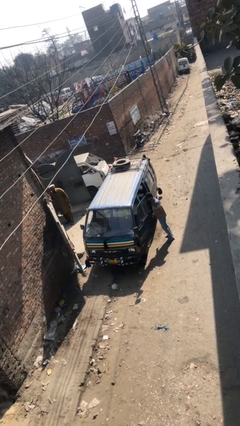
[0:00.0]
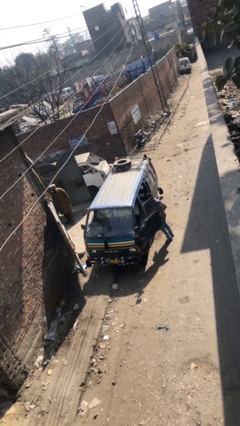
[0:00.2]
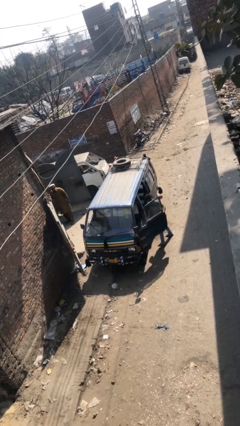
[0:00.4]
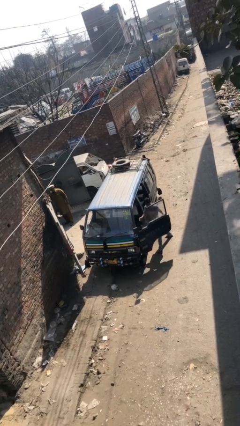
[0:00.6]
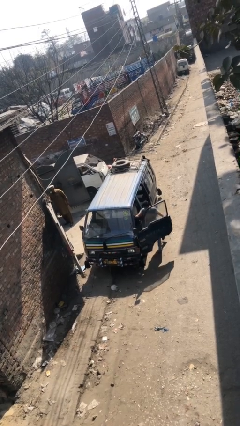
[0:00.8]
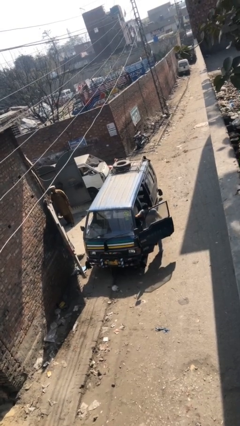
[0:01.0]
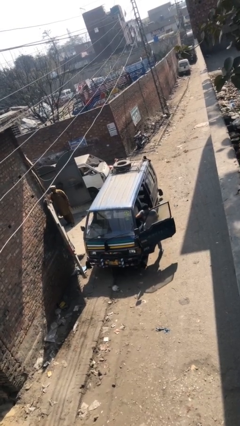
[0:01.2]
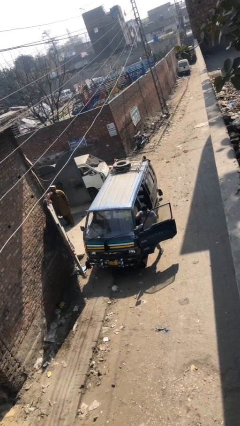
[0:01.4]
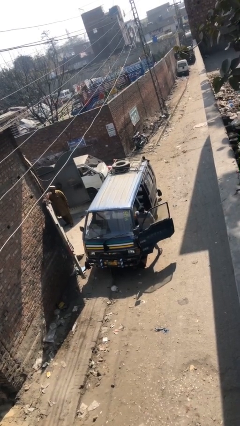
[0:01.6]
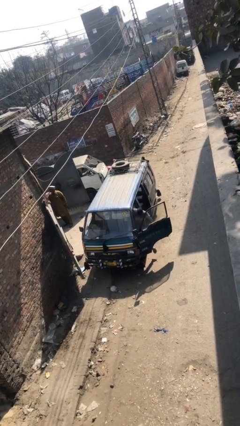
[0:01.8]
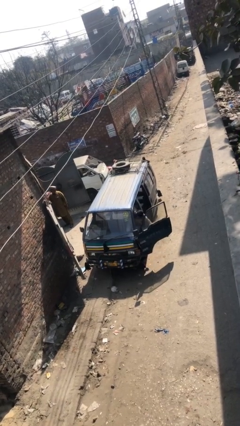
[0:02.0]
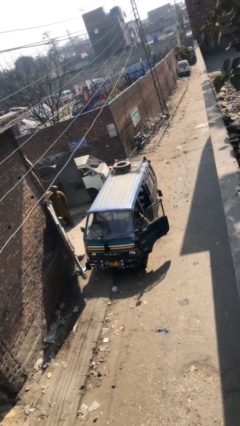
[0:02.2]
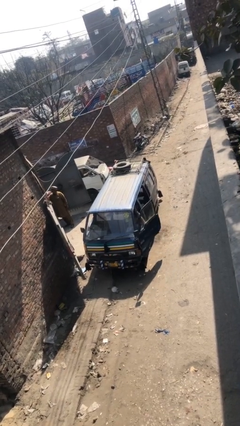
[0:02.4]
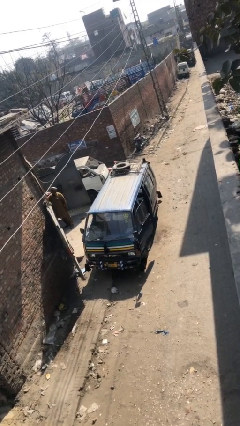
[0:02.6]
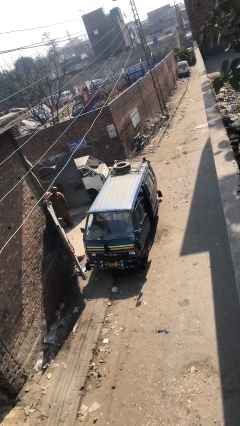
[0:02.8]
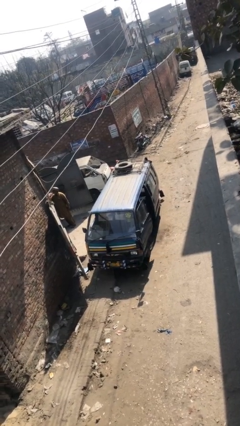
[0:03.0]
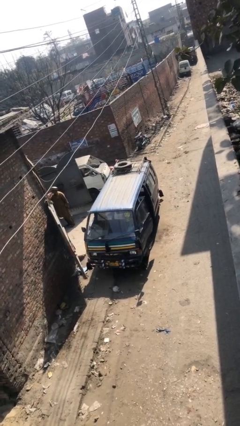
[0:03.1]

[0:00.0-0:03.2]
car picks up person

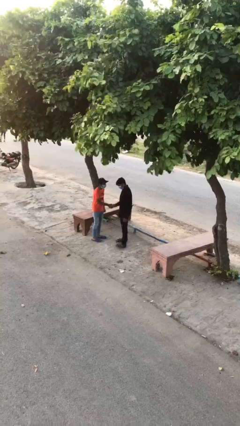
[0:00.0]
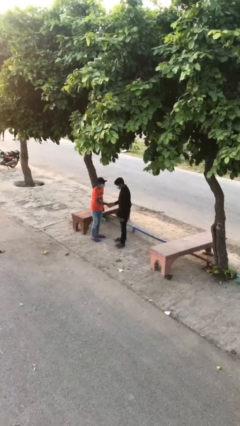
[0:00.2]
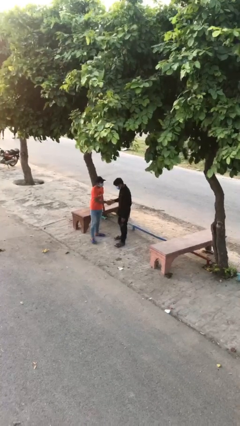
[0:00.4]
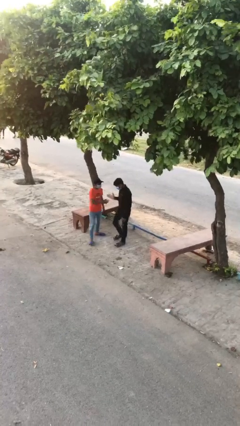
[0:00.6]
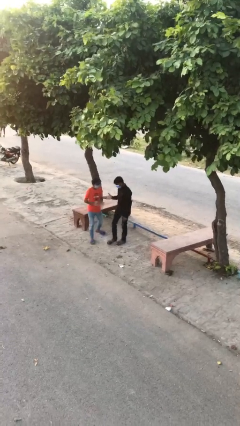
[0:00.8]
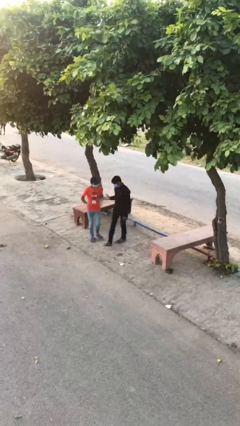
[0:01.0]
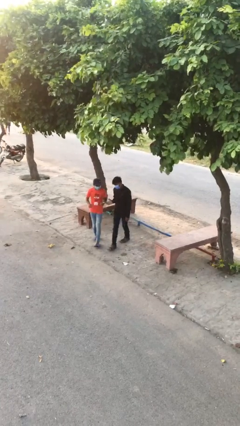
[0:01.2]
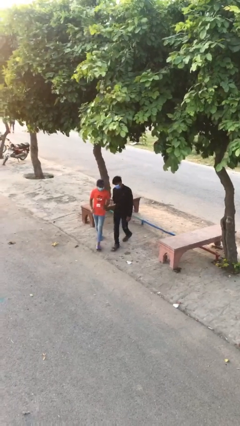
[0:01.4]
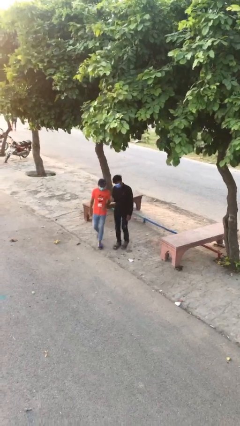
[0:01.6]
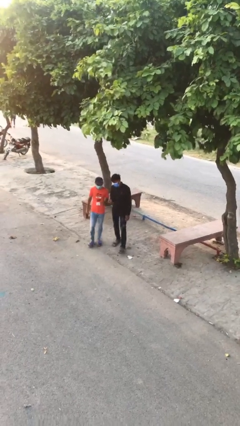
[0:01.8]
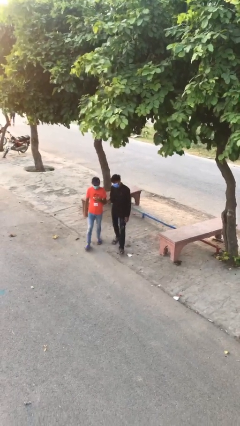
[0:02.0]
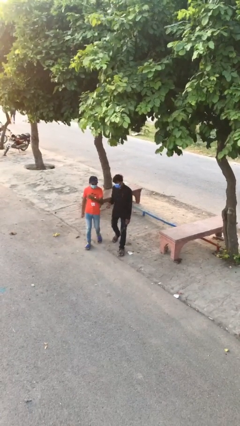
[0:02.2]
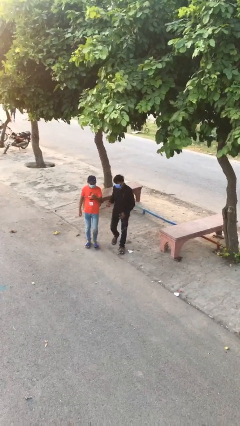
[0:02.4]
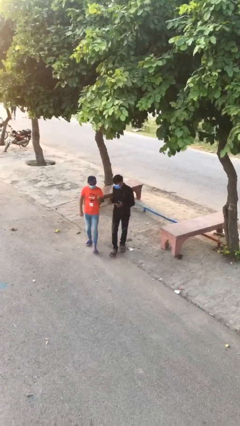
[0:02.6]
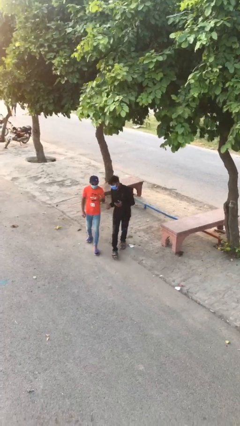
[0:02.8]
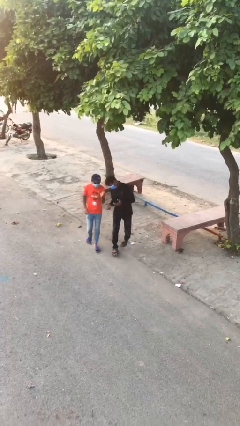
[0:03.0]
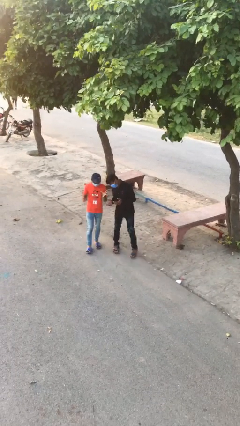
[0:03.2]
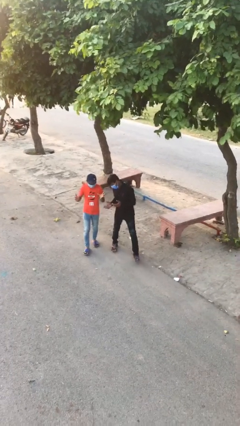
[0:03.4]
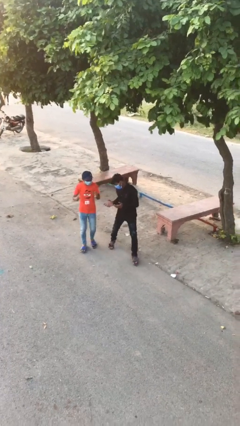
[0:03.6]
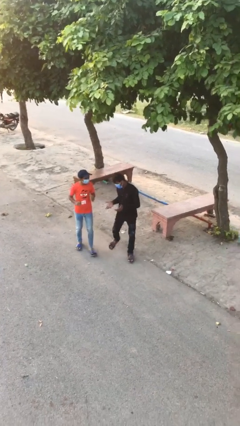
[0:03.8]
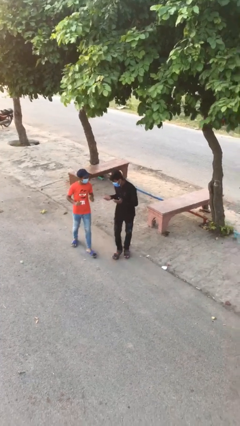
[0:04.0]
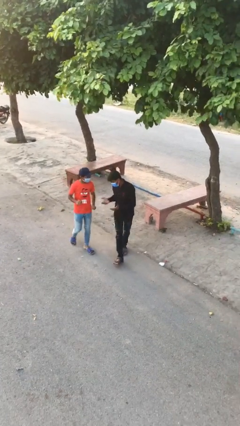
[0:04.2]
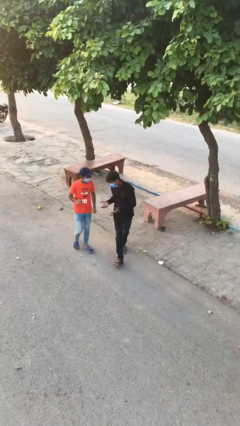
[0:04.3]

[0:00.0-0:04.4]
person talks to person

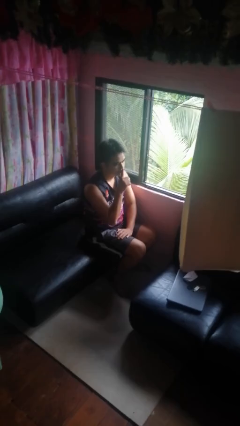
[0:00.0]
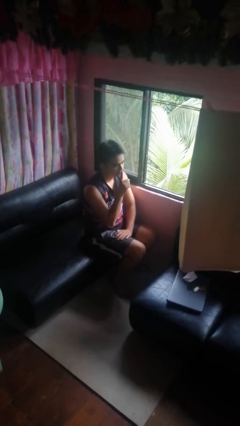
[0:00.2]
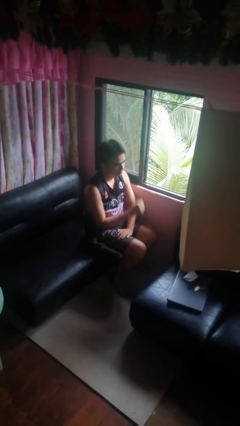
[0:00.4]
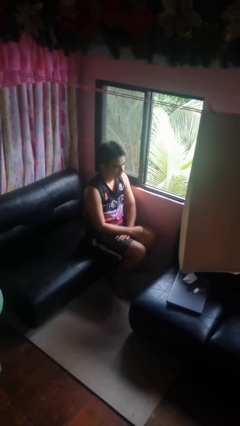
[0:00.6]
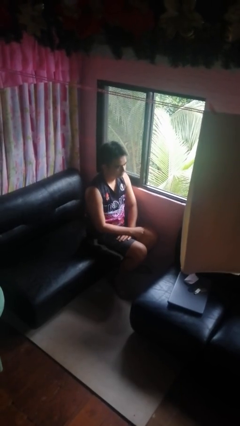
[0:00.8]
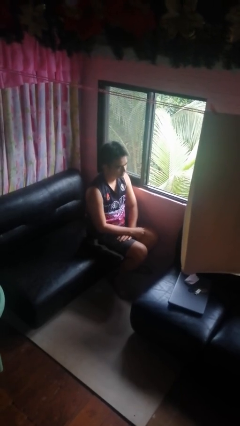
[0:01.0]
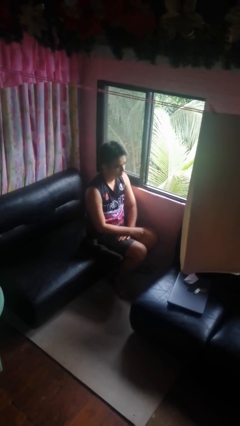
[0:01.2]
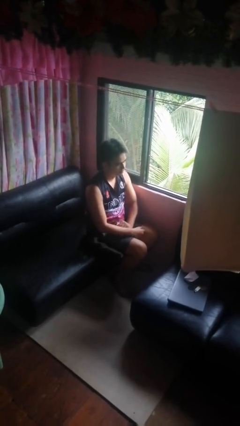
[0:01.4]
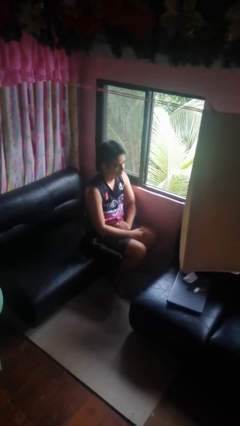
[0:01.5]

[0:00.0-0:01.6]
person gestures be quiet

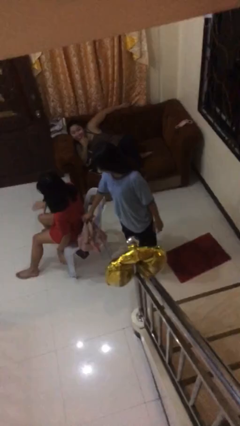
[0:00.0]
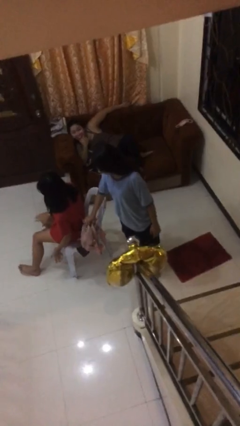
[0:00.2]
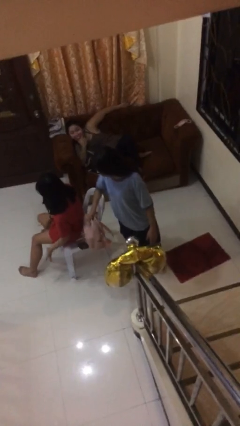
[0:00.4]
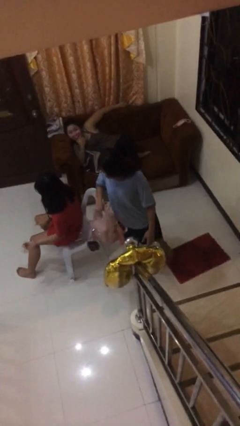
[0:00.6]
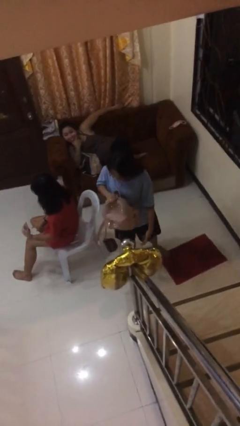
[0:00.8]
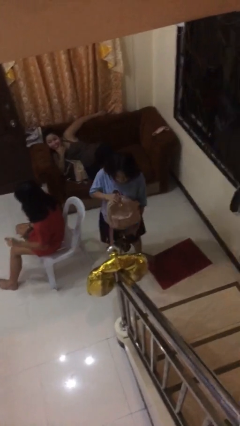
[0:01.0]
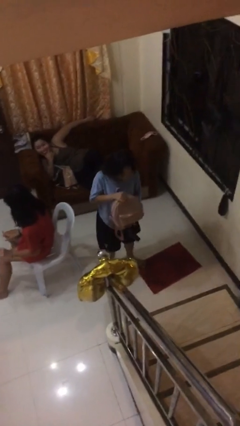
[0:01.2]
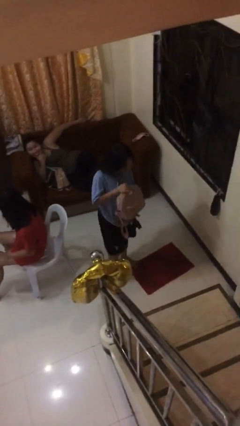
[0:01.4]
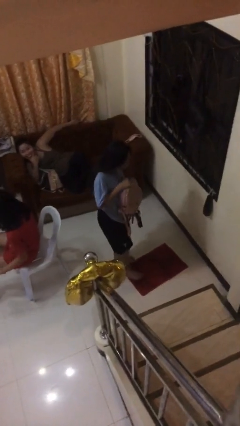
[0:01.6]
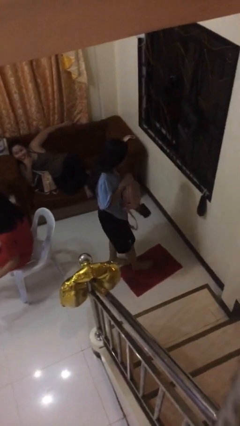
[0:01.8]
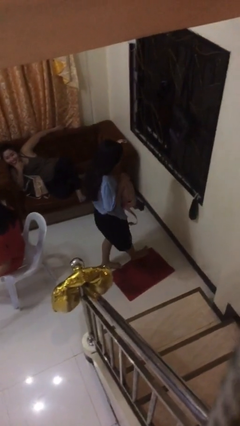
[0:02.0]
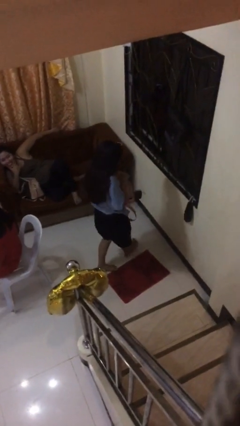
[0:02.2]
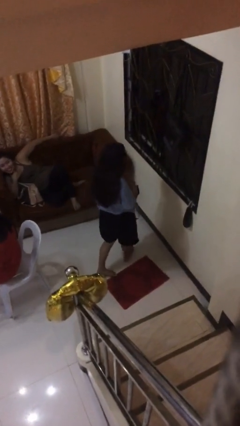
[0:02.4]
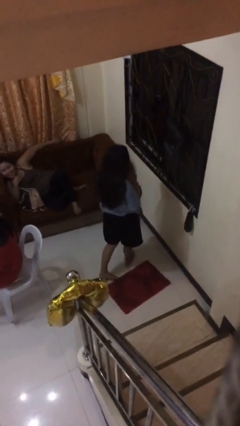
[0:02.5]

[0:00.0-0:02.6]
person steals object from person

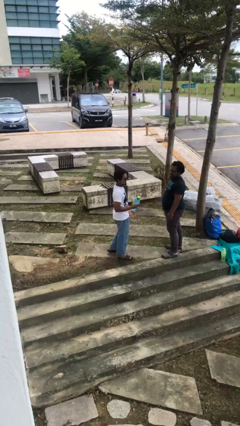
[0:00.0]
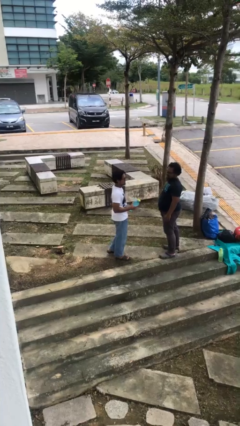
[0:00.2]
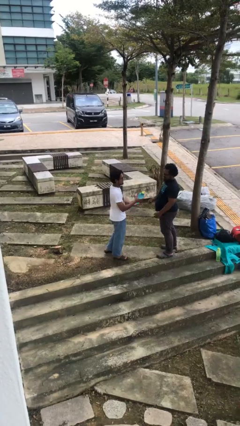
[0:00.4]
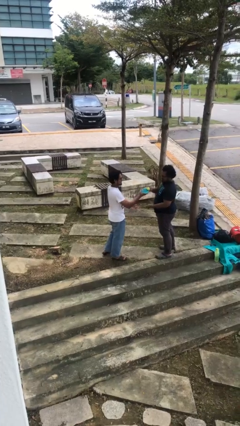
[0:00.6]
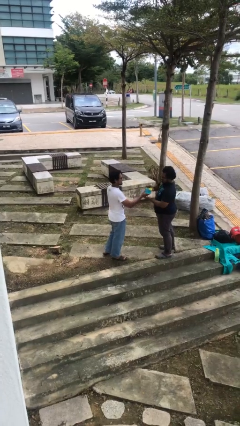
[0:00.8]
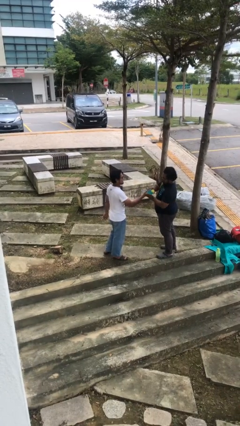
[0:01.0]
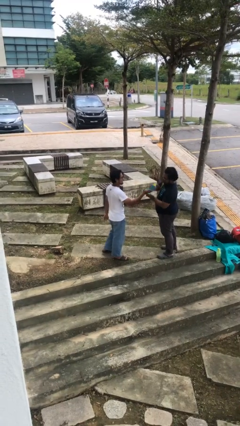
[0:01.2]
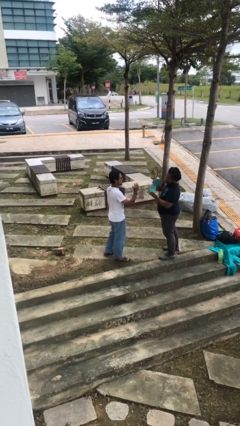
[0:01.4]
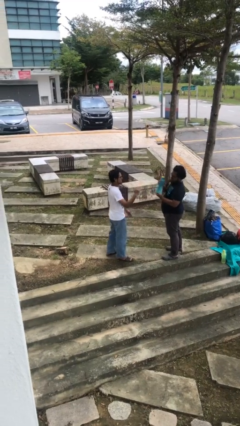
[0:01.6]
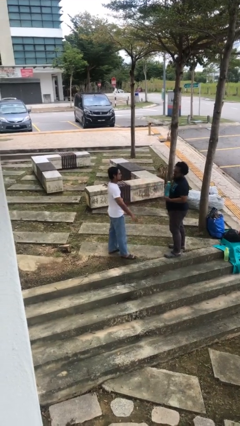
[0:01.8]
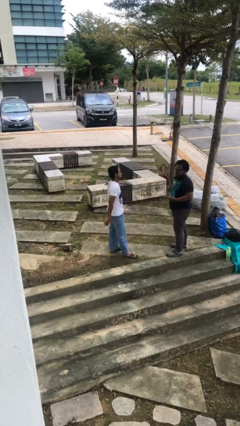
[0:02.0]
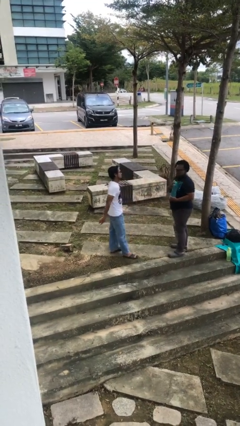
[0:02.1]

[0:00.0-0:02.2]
person transfers object to person

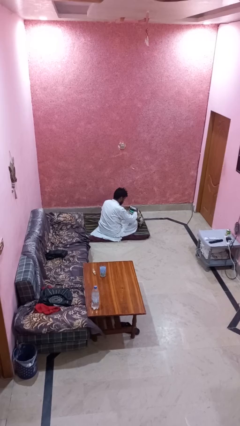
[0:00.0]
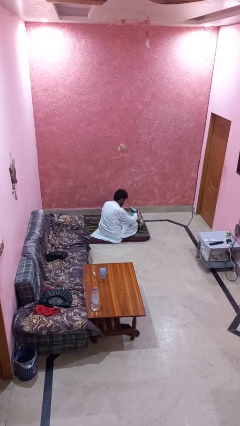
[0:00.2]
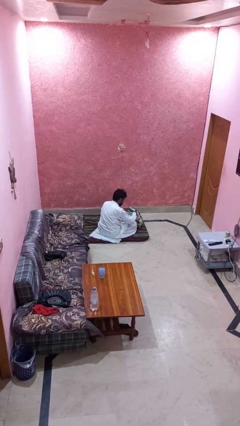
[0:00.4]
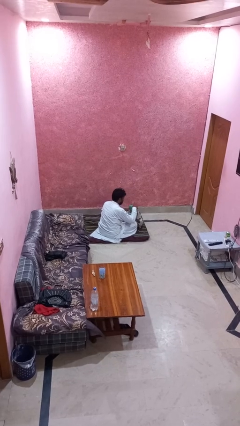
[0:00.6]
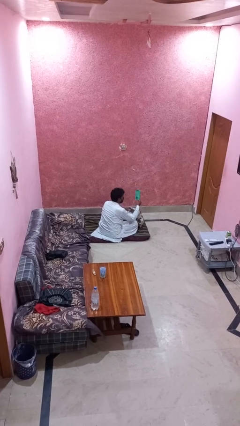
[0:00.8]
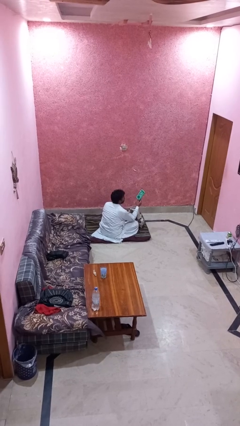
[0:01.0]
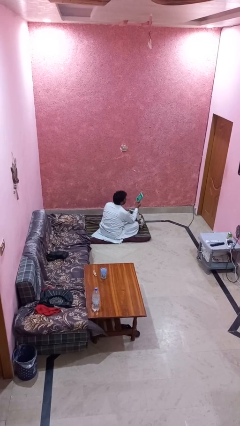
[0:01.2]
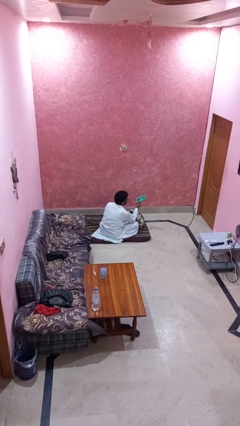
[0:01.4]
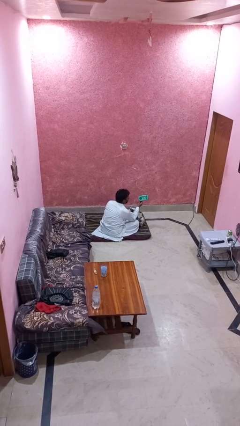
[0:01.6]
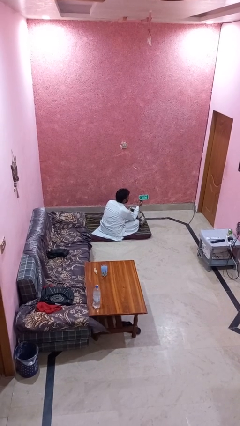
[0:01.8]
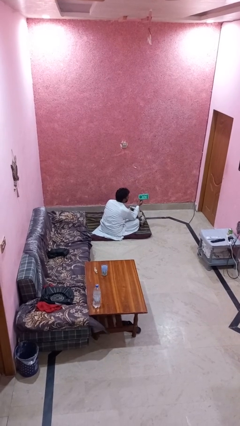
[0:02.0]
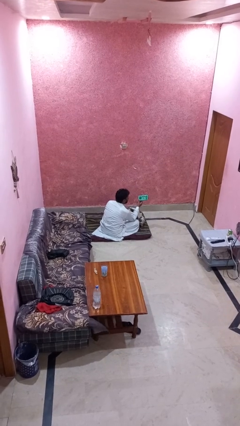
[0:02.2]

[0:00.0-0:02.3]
person takes object from backpack

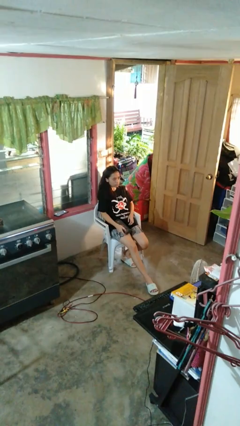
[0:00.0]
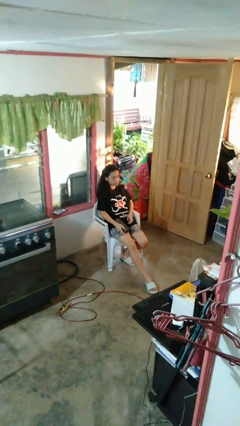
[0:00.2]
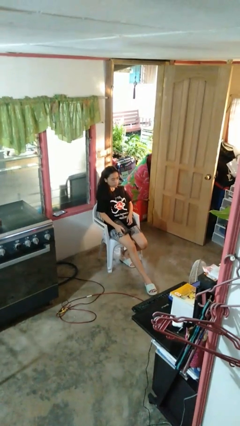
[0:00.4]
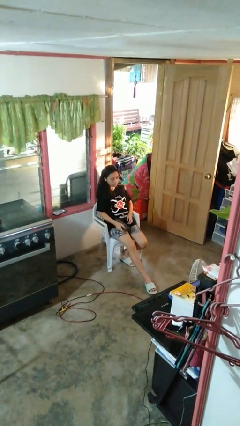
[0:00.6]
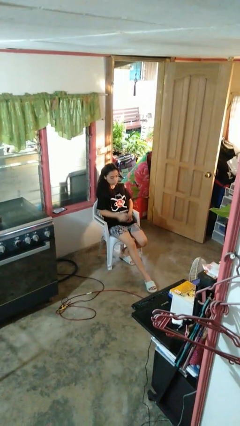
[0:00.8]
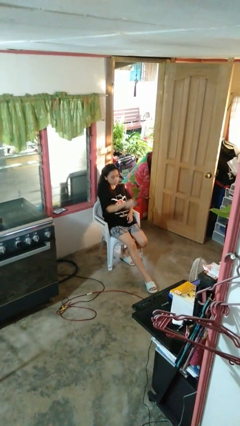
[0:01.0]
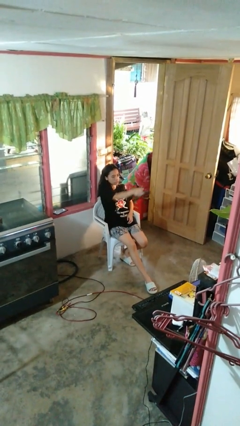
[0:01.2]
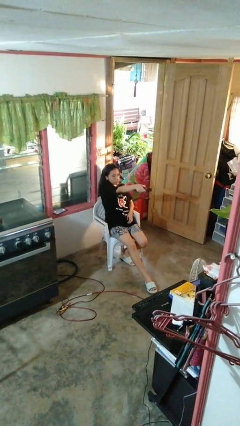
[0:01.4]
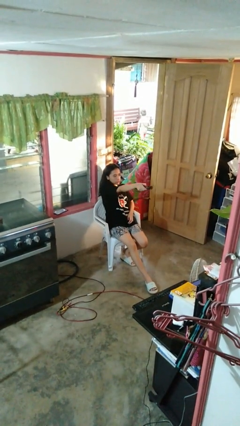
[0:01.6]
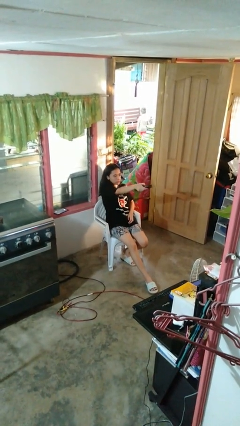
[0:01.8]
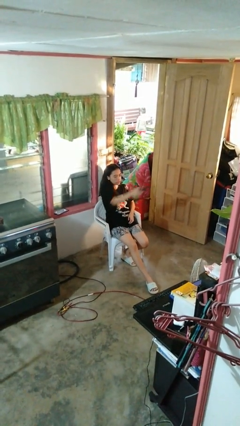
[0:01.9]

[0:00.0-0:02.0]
person uses television remote
